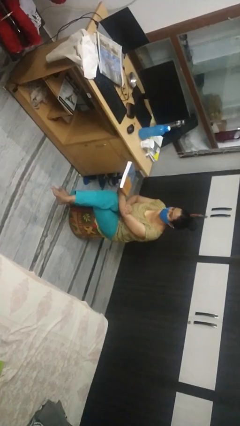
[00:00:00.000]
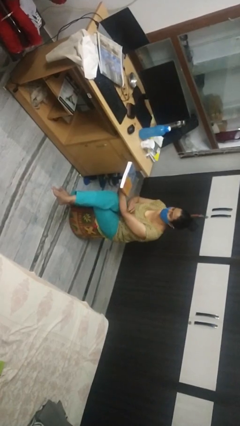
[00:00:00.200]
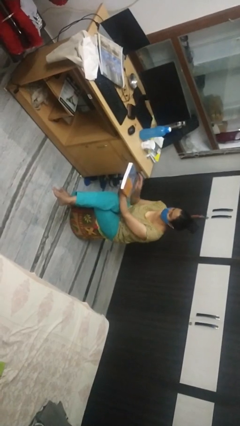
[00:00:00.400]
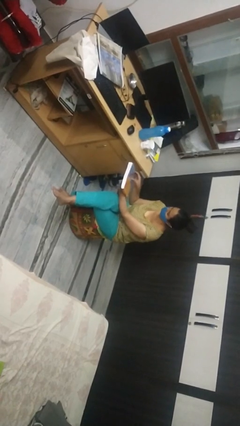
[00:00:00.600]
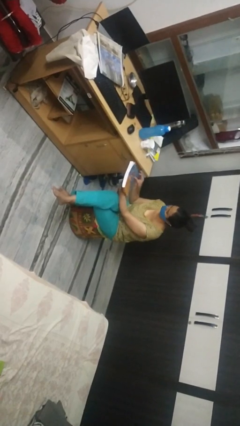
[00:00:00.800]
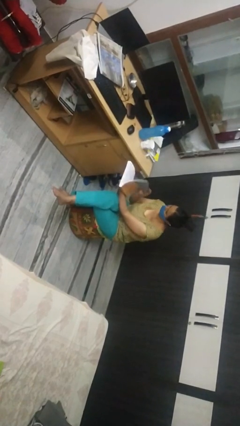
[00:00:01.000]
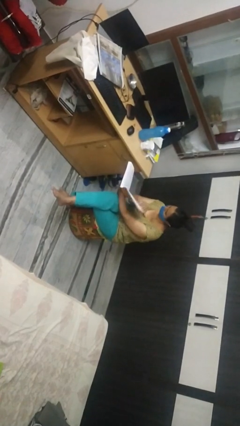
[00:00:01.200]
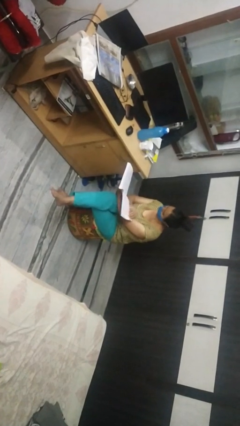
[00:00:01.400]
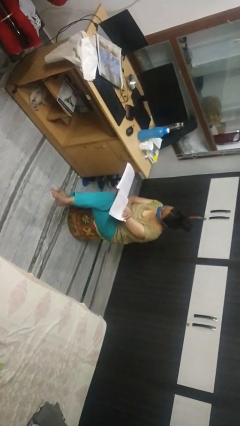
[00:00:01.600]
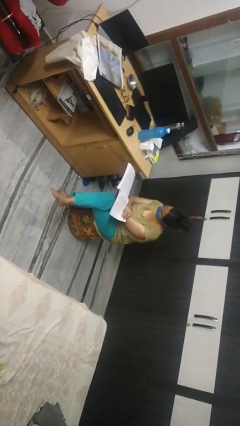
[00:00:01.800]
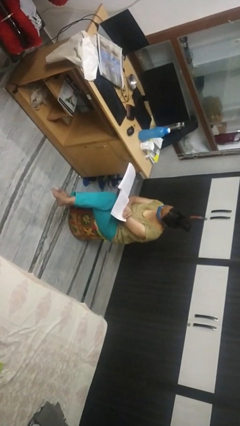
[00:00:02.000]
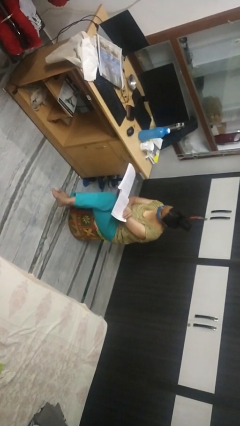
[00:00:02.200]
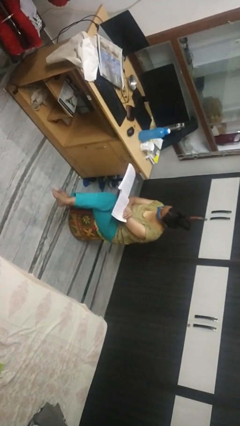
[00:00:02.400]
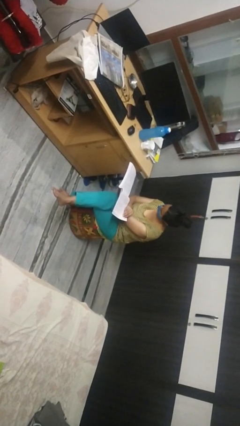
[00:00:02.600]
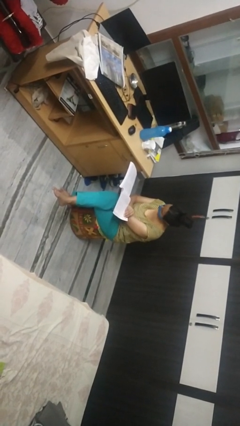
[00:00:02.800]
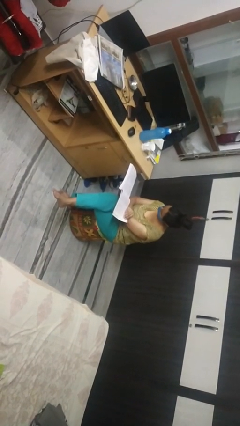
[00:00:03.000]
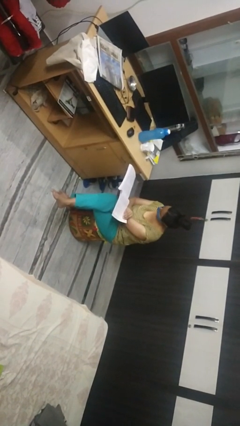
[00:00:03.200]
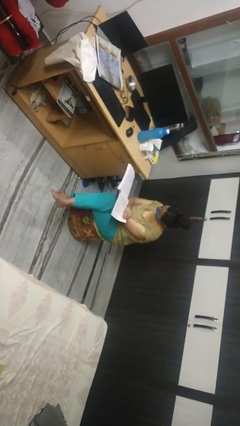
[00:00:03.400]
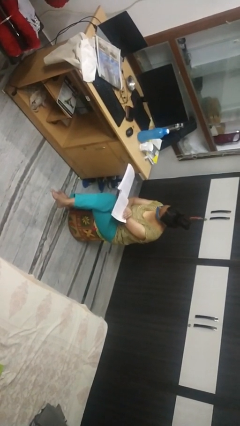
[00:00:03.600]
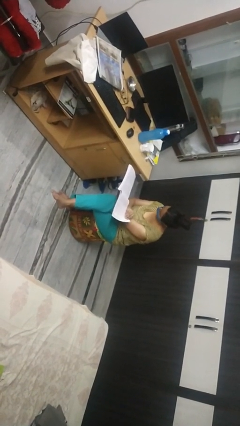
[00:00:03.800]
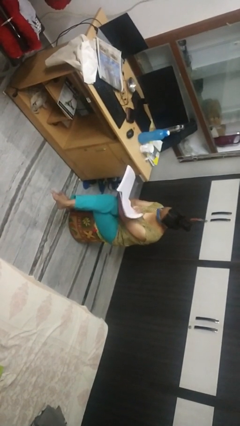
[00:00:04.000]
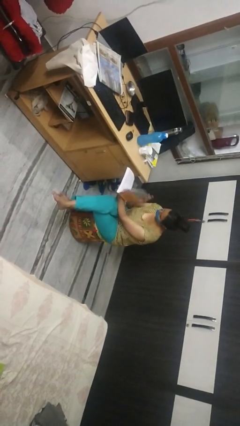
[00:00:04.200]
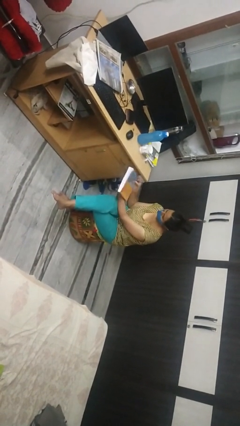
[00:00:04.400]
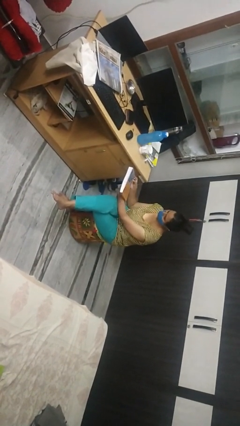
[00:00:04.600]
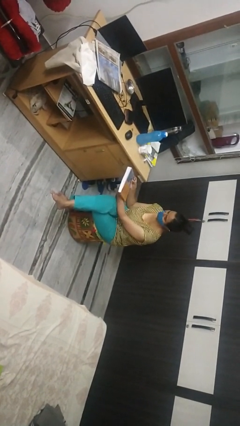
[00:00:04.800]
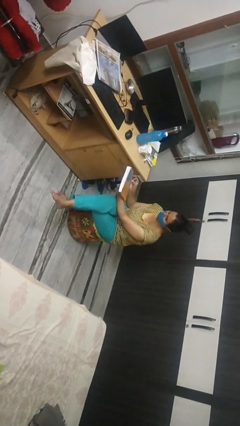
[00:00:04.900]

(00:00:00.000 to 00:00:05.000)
person reads book

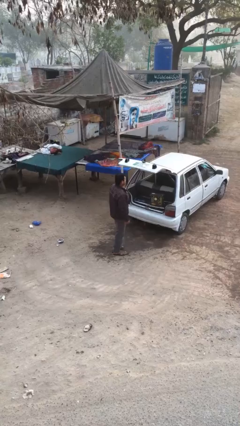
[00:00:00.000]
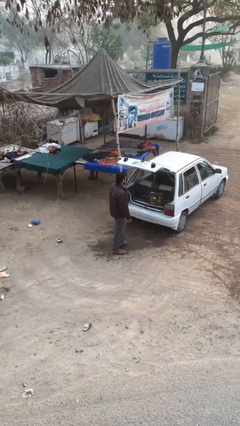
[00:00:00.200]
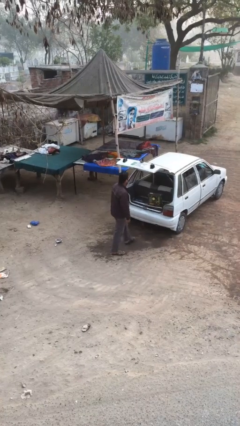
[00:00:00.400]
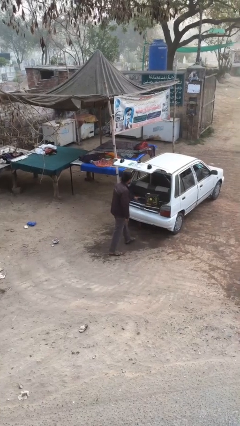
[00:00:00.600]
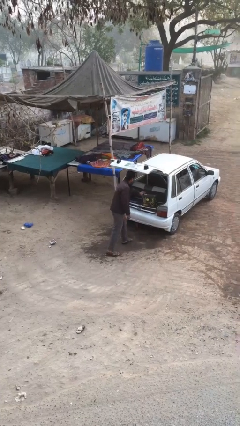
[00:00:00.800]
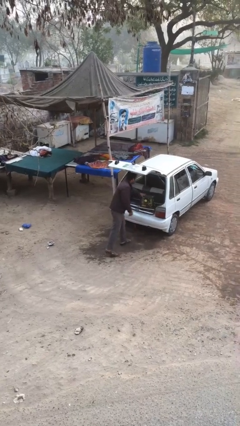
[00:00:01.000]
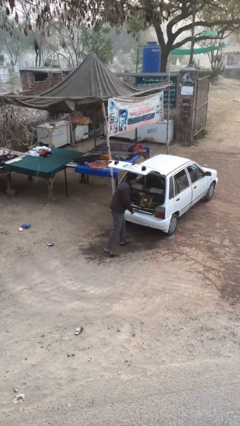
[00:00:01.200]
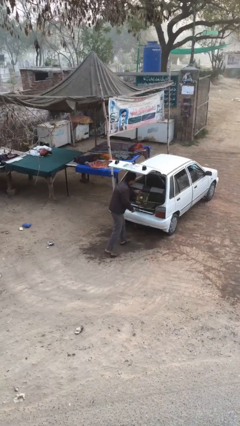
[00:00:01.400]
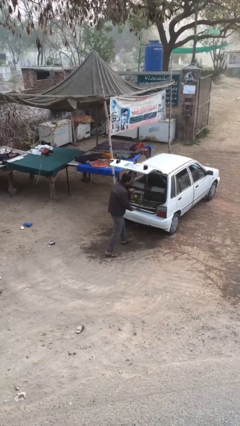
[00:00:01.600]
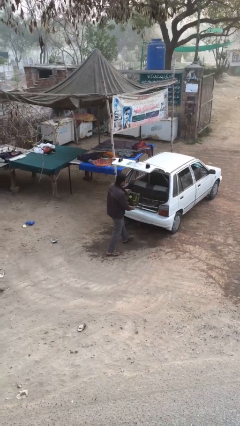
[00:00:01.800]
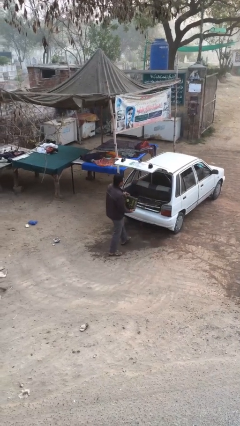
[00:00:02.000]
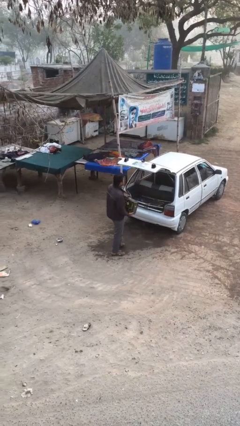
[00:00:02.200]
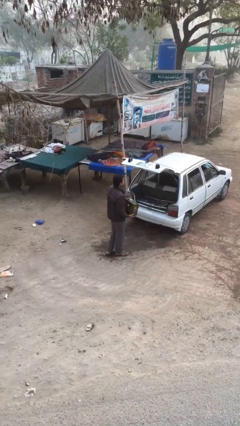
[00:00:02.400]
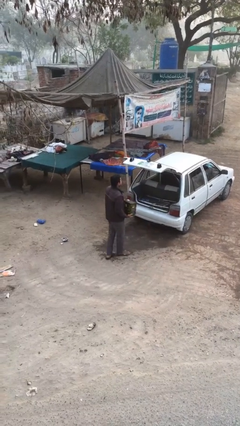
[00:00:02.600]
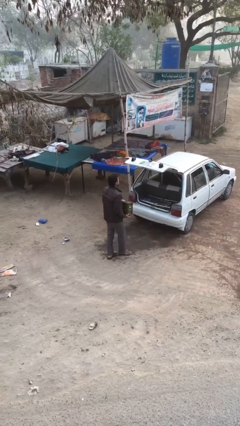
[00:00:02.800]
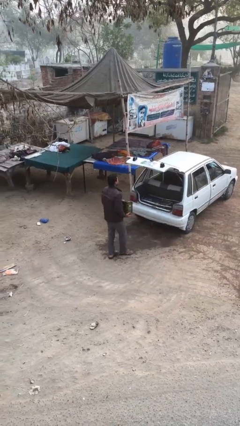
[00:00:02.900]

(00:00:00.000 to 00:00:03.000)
person unloads car

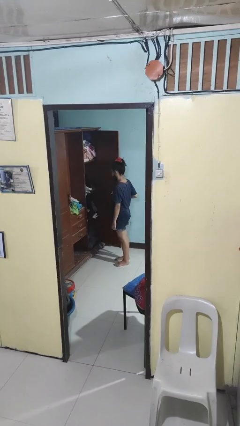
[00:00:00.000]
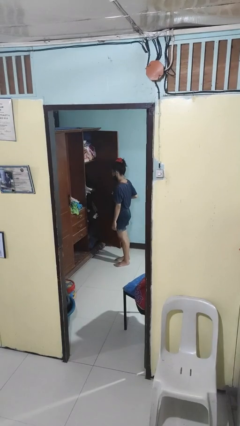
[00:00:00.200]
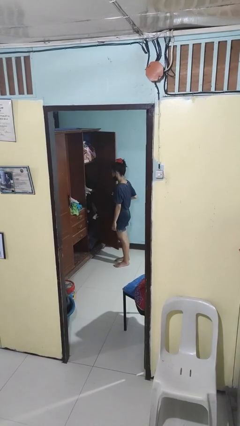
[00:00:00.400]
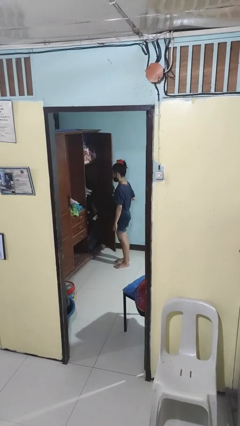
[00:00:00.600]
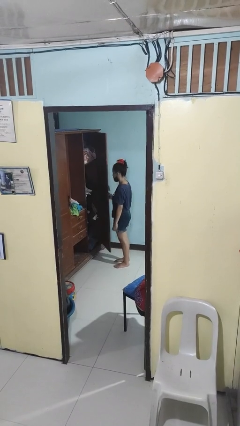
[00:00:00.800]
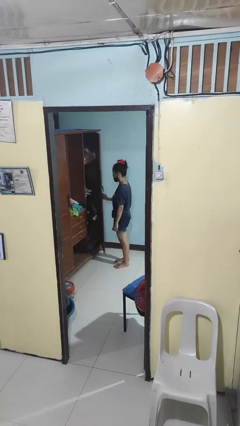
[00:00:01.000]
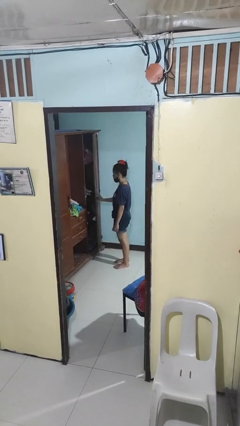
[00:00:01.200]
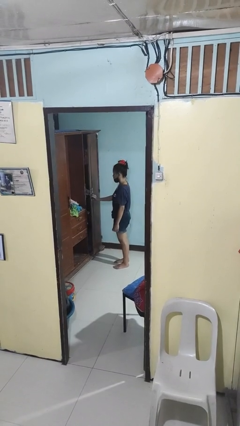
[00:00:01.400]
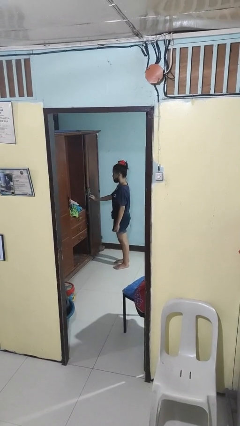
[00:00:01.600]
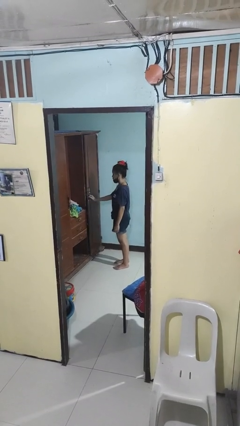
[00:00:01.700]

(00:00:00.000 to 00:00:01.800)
person closes closet door

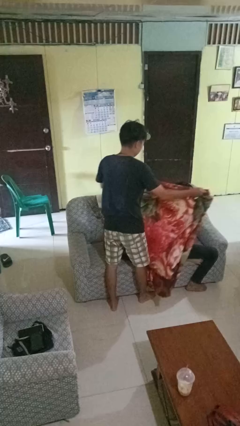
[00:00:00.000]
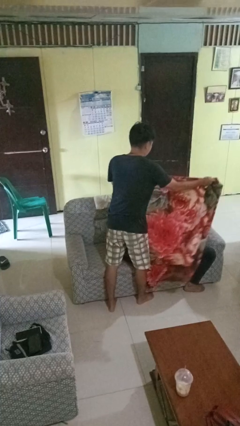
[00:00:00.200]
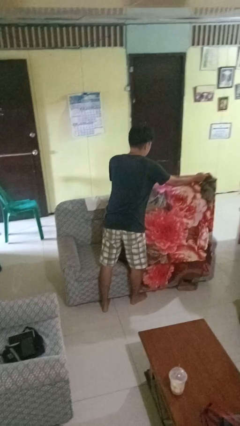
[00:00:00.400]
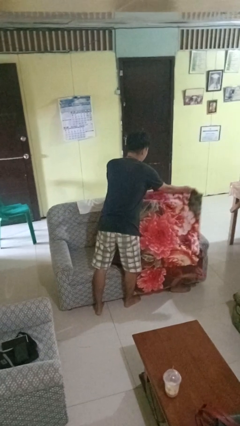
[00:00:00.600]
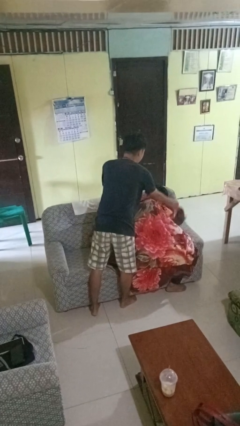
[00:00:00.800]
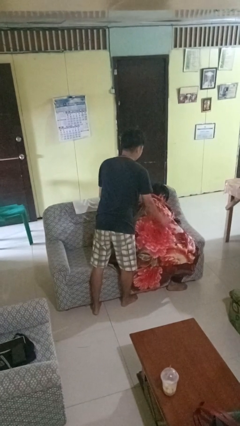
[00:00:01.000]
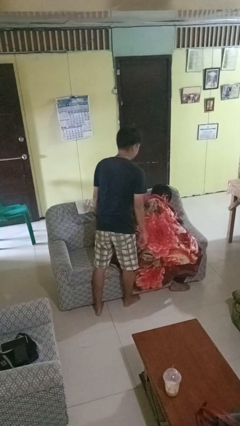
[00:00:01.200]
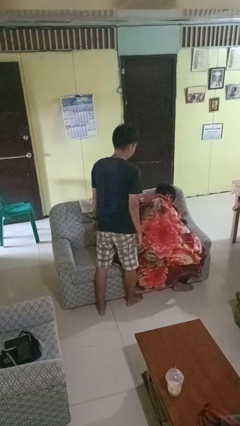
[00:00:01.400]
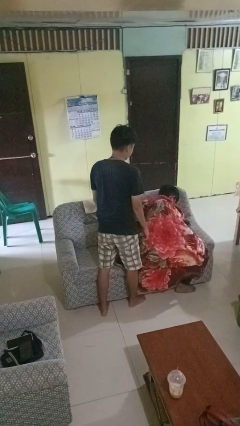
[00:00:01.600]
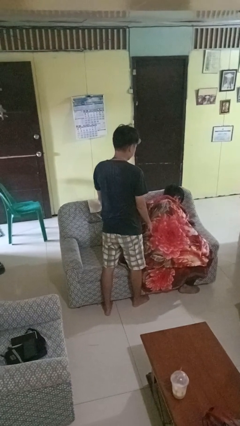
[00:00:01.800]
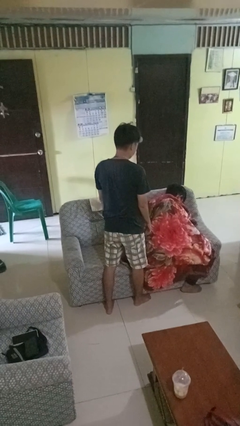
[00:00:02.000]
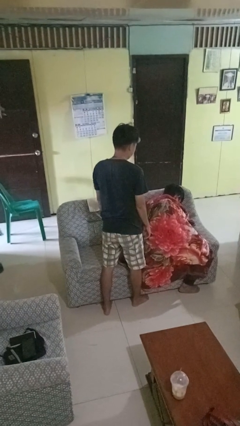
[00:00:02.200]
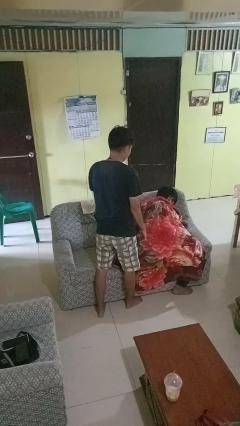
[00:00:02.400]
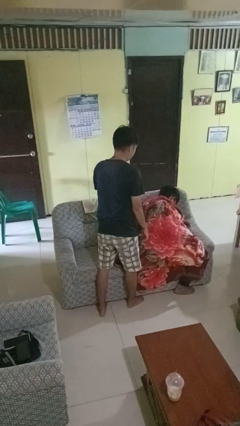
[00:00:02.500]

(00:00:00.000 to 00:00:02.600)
person covers friend with blanket

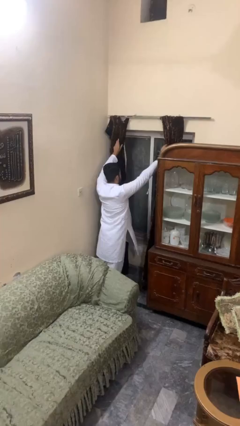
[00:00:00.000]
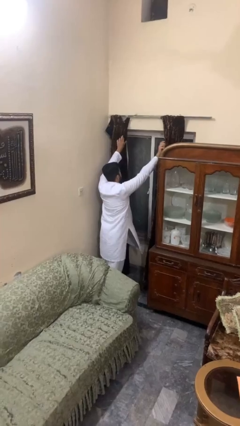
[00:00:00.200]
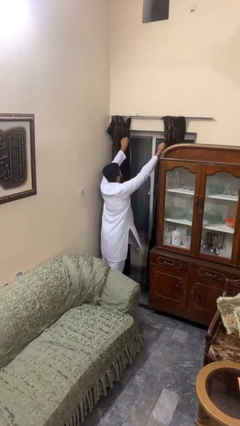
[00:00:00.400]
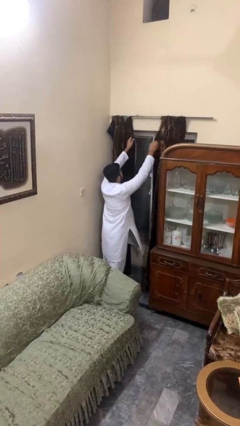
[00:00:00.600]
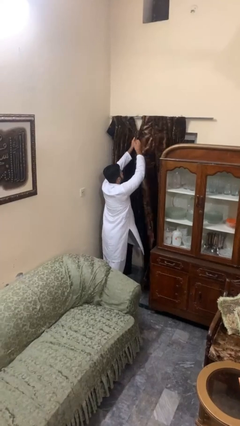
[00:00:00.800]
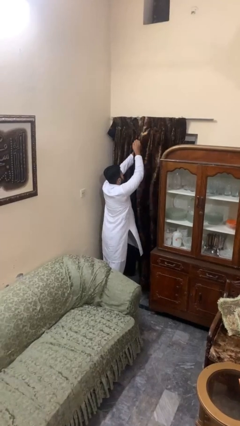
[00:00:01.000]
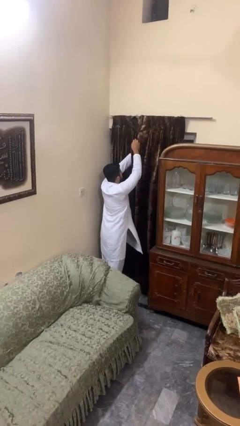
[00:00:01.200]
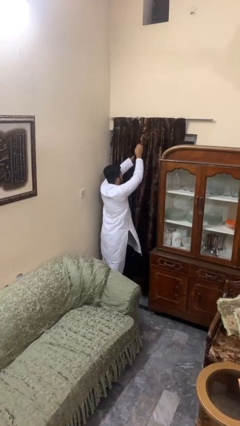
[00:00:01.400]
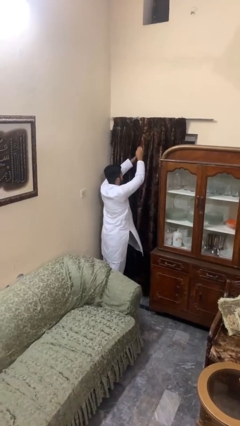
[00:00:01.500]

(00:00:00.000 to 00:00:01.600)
person closes curtains

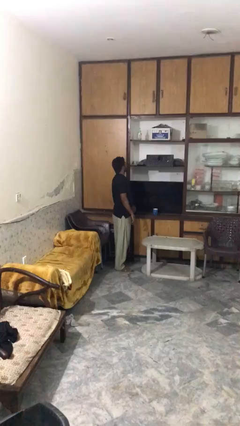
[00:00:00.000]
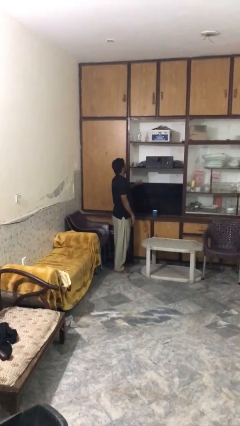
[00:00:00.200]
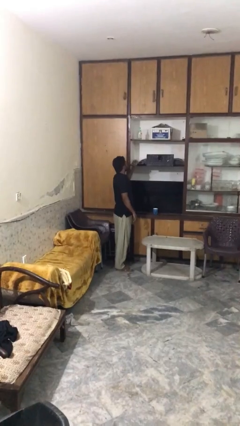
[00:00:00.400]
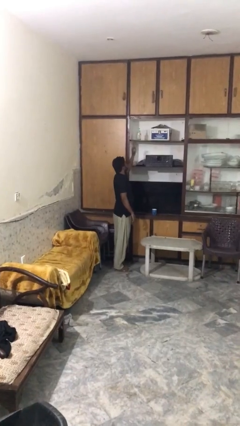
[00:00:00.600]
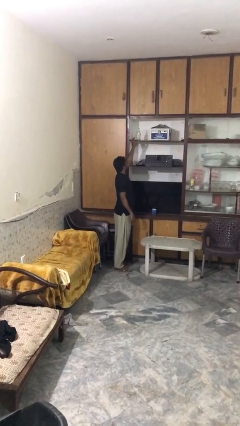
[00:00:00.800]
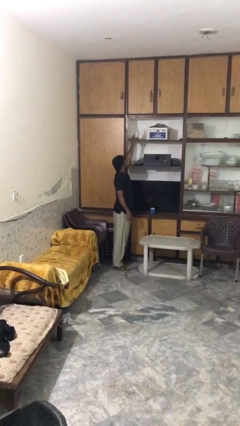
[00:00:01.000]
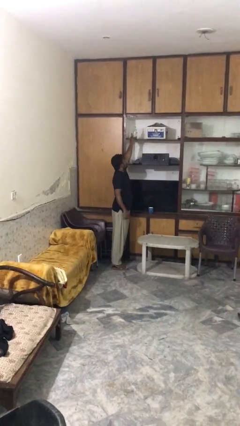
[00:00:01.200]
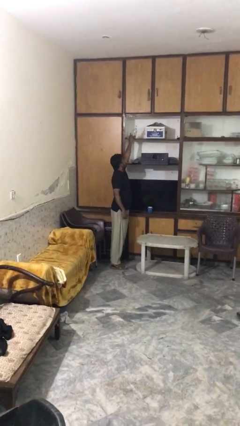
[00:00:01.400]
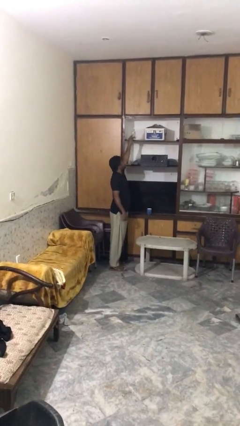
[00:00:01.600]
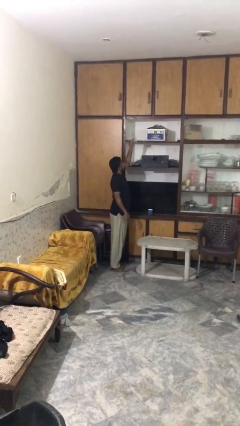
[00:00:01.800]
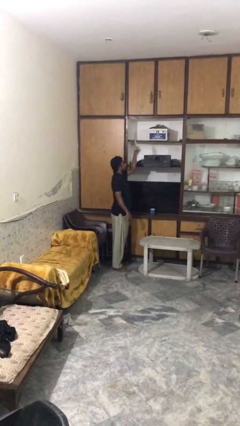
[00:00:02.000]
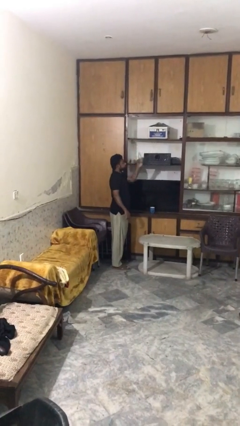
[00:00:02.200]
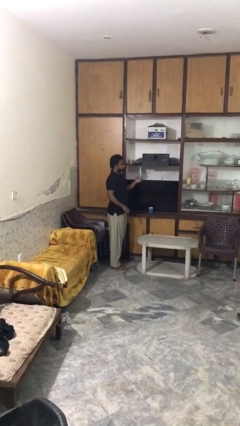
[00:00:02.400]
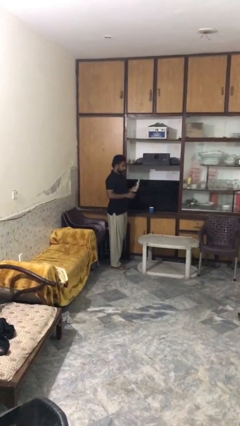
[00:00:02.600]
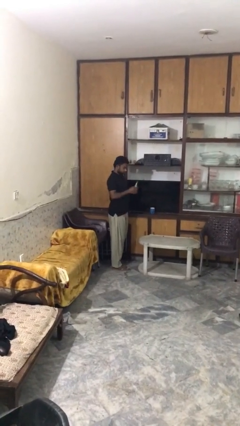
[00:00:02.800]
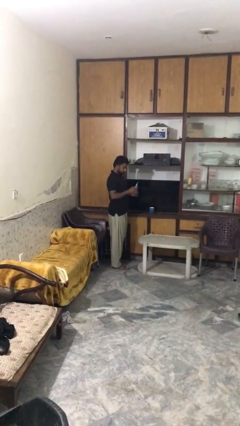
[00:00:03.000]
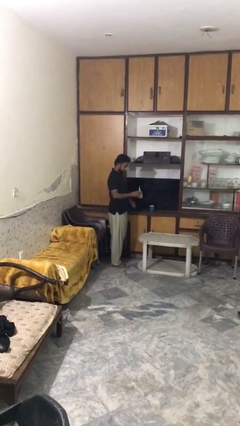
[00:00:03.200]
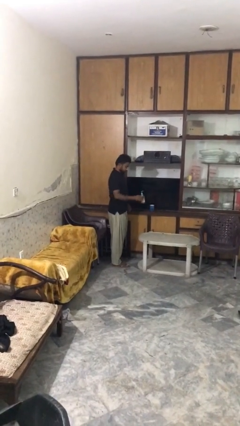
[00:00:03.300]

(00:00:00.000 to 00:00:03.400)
person picks up object from shelf
